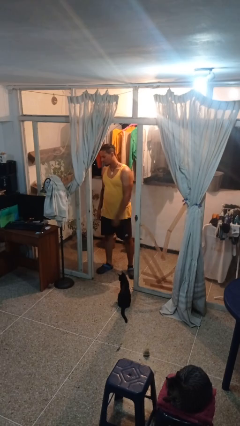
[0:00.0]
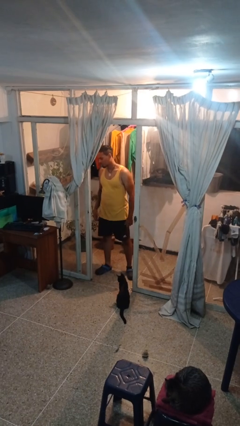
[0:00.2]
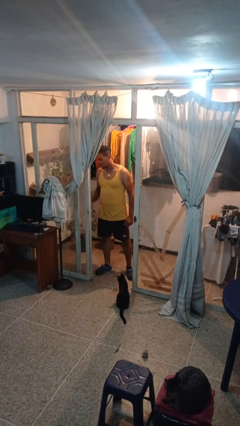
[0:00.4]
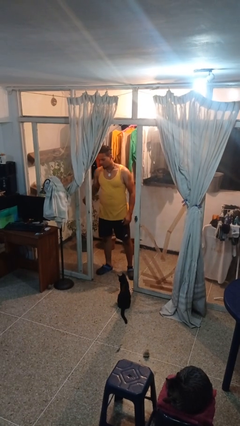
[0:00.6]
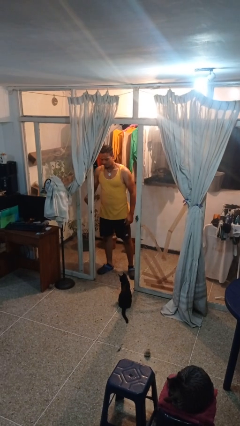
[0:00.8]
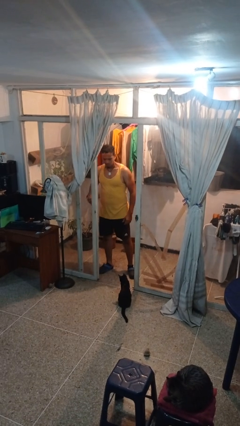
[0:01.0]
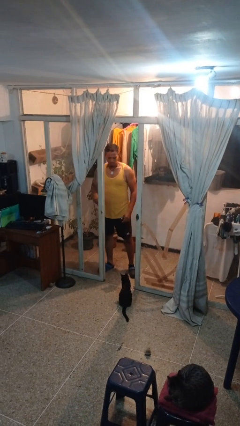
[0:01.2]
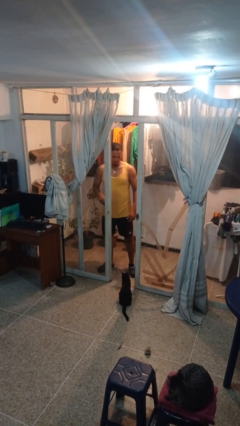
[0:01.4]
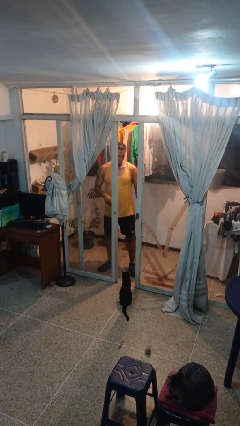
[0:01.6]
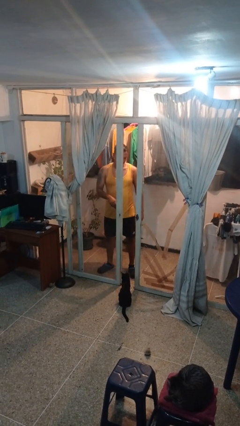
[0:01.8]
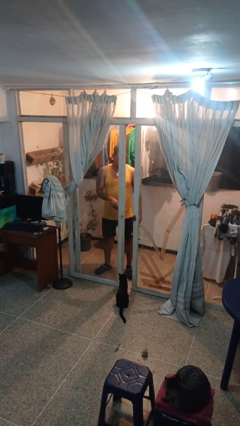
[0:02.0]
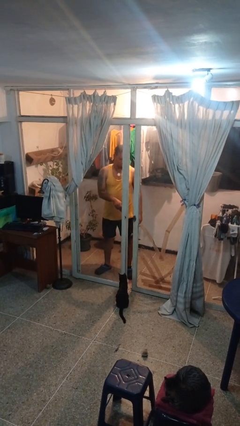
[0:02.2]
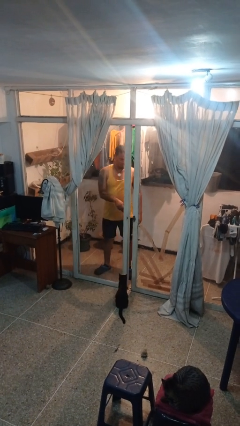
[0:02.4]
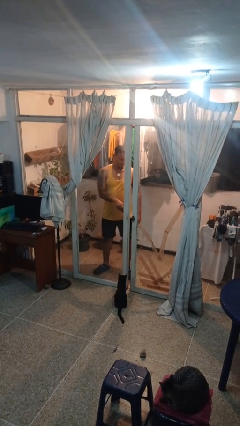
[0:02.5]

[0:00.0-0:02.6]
person closes sliding door

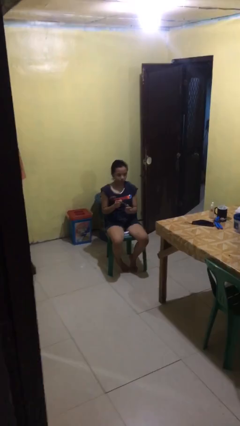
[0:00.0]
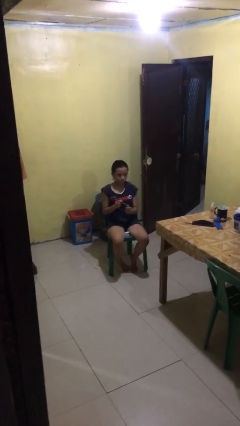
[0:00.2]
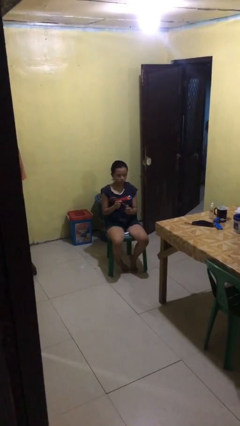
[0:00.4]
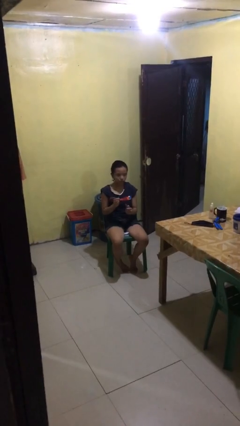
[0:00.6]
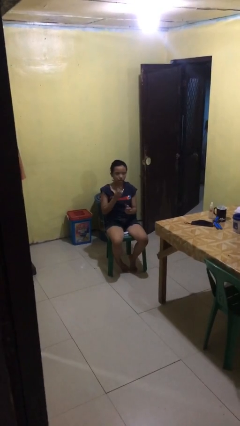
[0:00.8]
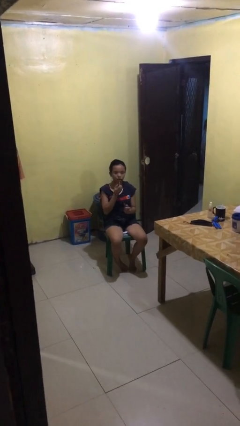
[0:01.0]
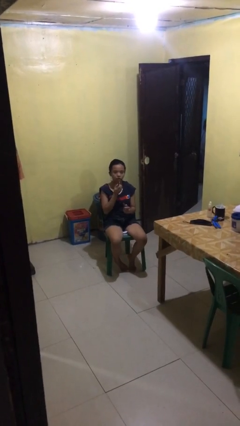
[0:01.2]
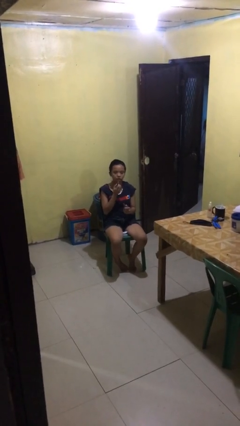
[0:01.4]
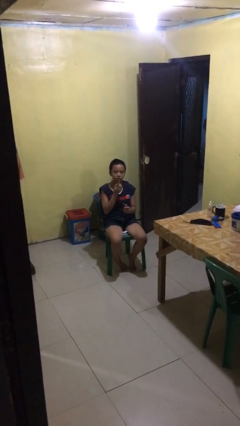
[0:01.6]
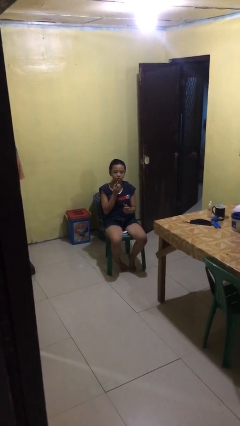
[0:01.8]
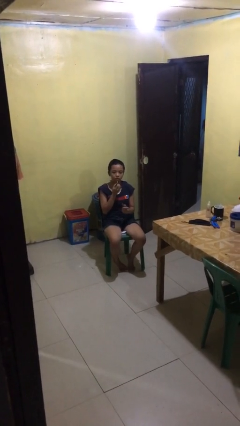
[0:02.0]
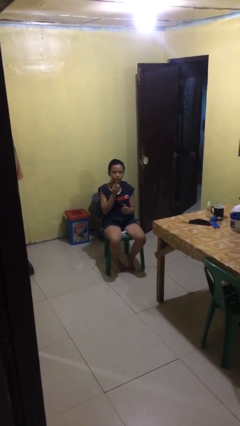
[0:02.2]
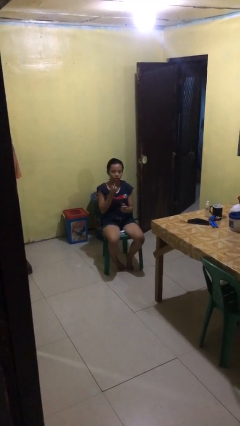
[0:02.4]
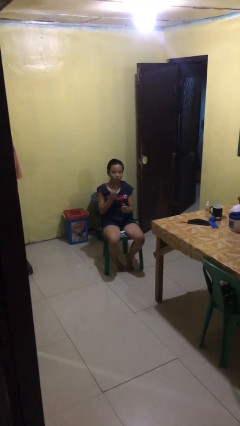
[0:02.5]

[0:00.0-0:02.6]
person applies lip makeup

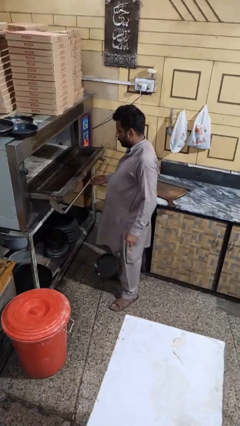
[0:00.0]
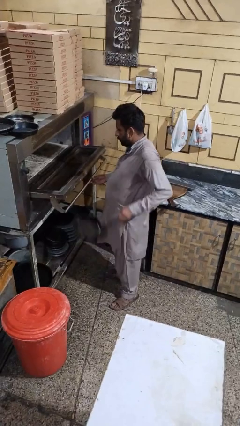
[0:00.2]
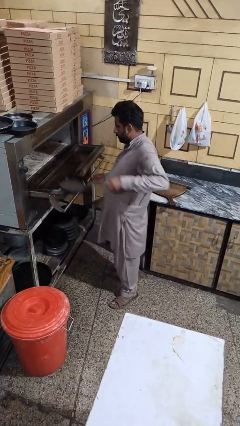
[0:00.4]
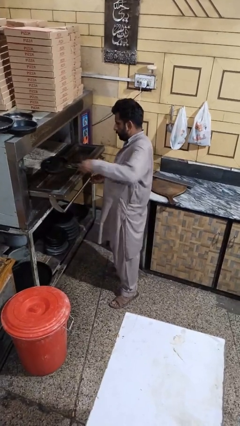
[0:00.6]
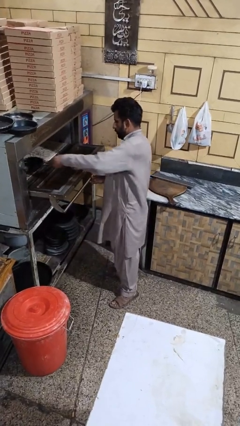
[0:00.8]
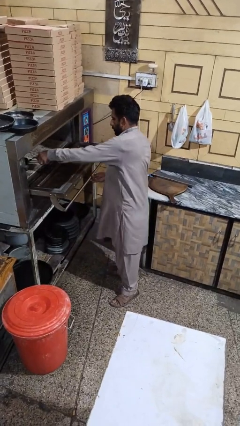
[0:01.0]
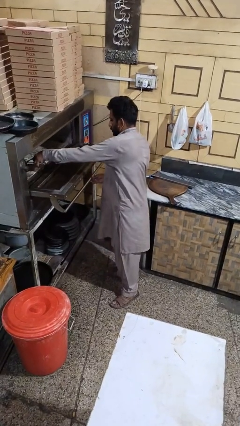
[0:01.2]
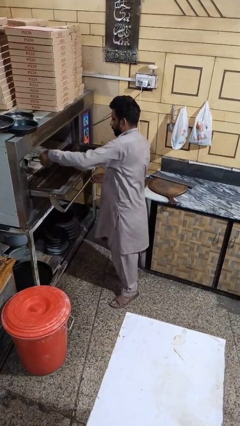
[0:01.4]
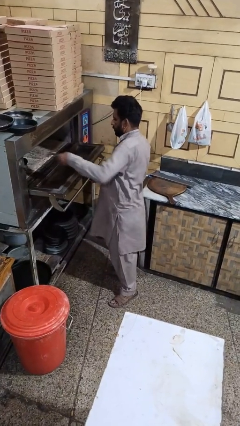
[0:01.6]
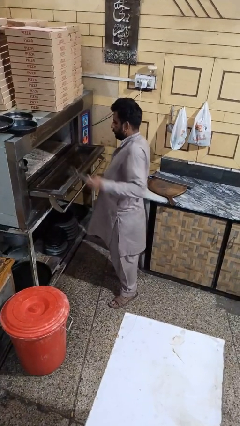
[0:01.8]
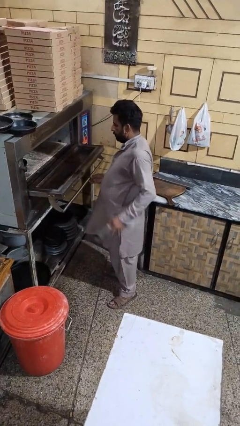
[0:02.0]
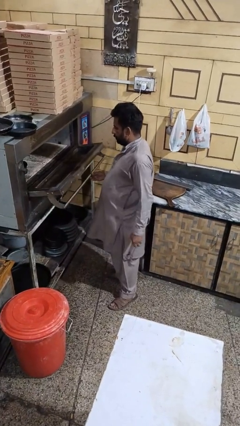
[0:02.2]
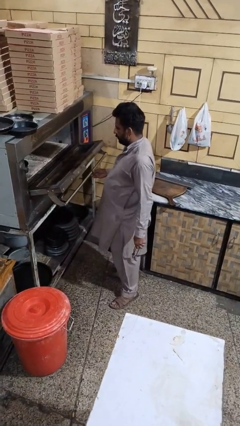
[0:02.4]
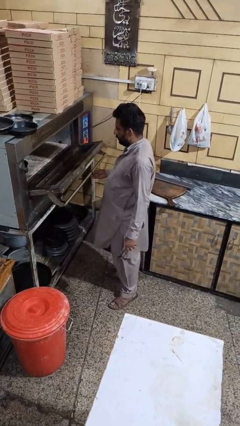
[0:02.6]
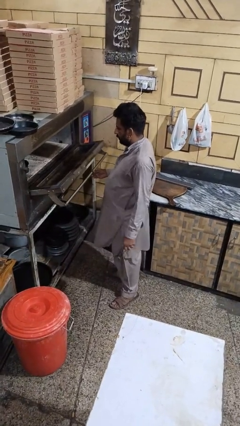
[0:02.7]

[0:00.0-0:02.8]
person puts object into microwave

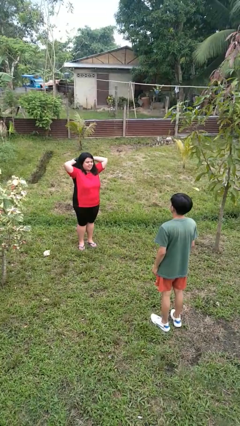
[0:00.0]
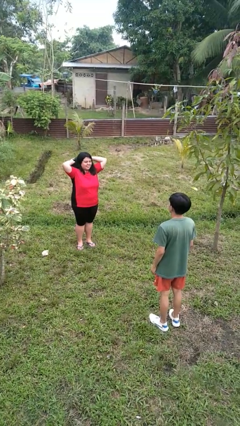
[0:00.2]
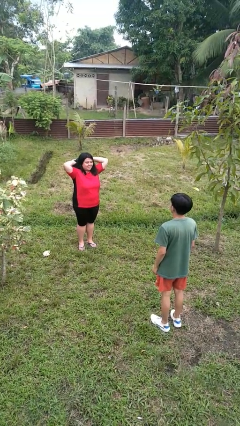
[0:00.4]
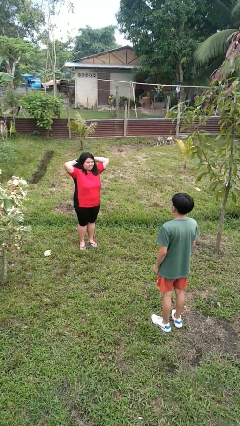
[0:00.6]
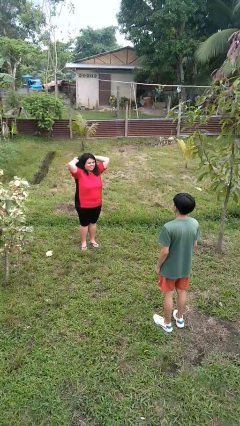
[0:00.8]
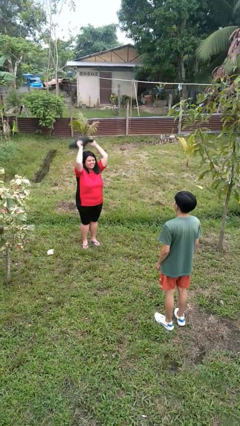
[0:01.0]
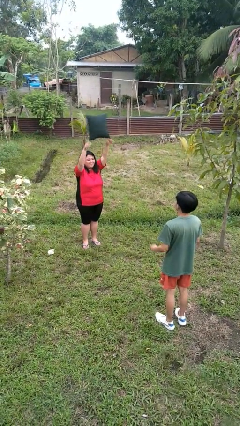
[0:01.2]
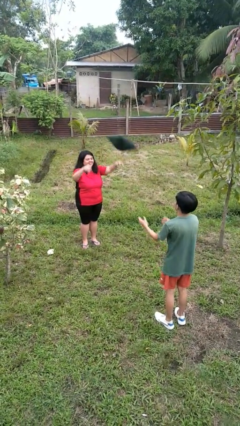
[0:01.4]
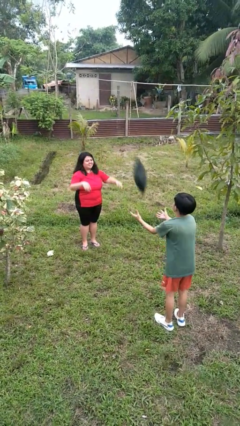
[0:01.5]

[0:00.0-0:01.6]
person throws object to person

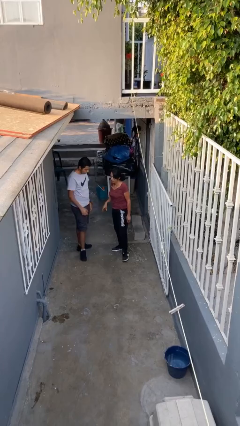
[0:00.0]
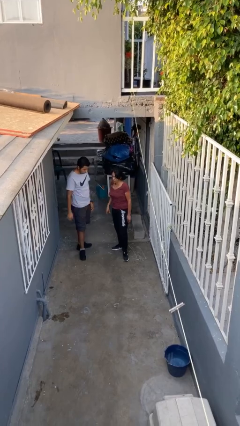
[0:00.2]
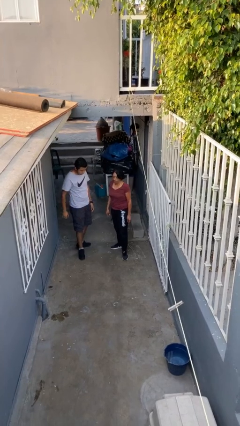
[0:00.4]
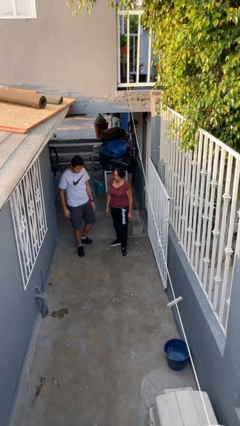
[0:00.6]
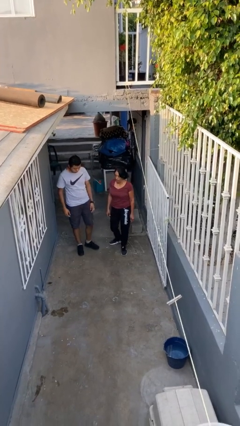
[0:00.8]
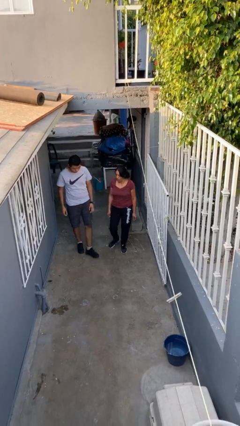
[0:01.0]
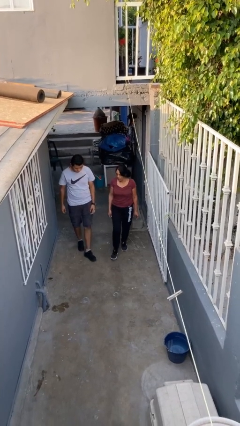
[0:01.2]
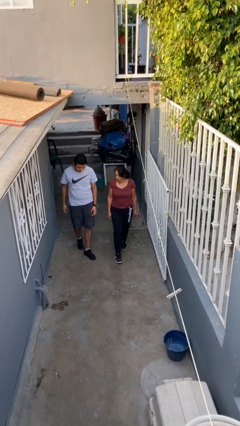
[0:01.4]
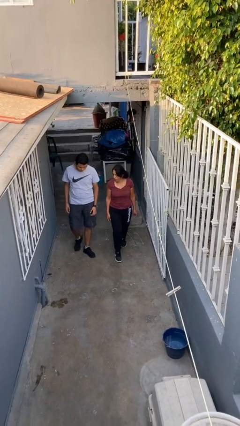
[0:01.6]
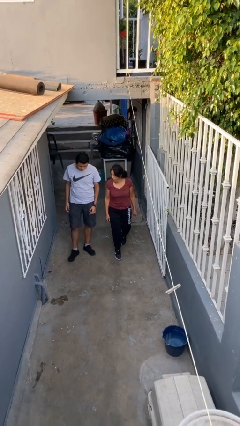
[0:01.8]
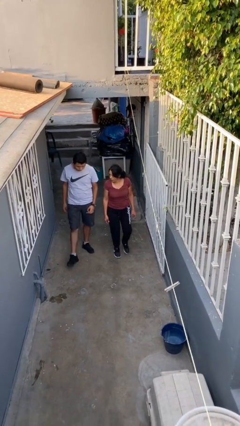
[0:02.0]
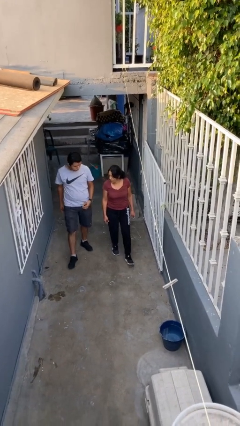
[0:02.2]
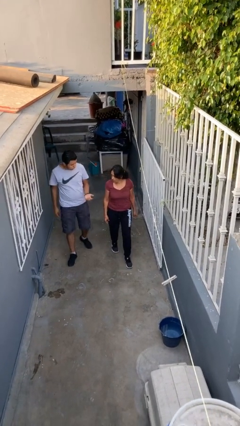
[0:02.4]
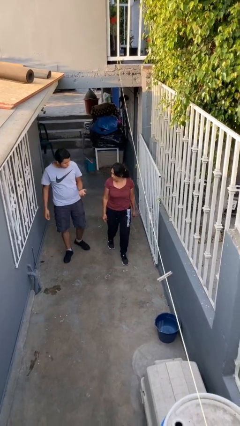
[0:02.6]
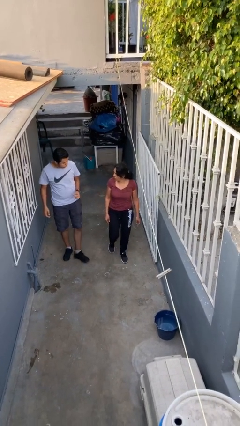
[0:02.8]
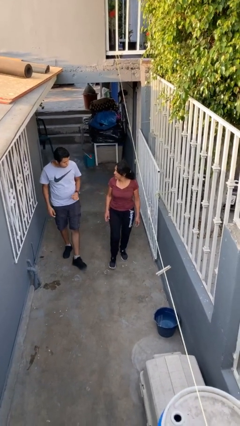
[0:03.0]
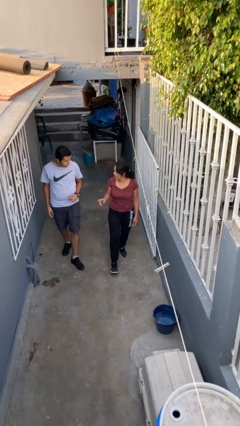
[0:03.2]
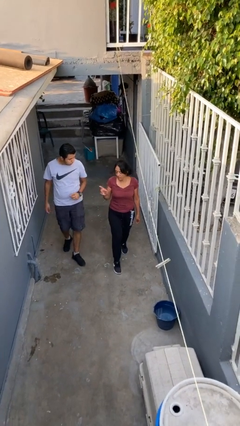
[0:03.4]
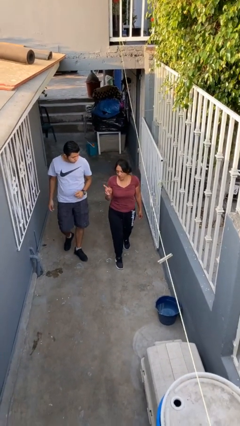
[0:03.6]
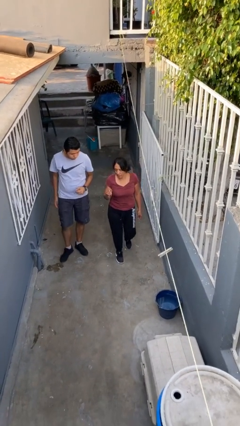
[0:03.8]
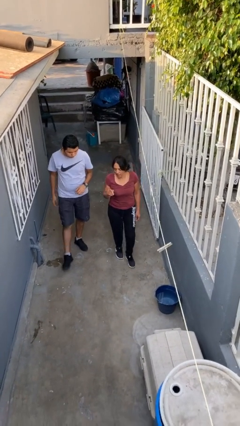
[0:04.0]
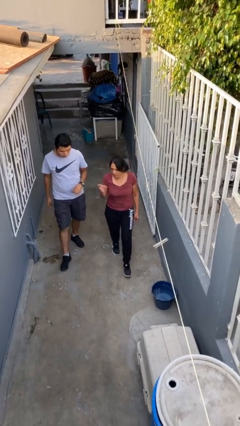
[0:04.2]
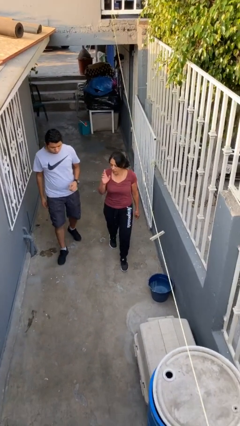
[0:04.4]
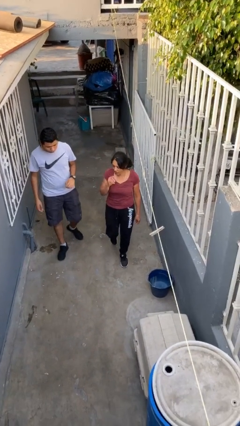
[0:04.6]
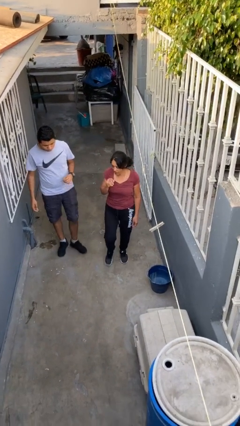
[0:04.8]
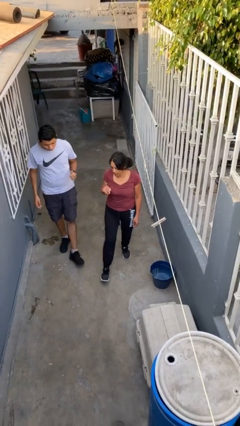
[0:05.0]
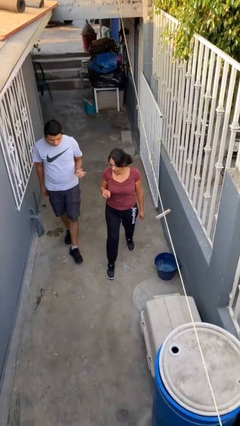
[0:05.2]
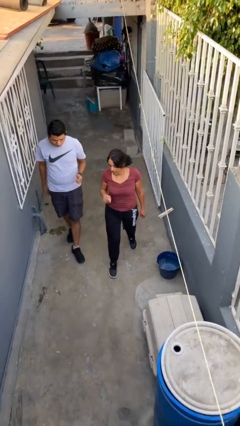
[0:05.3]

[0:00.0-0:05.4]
person talks to person

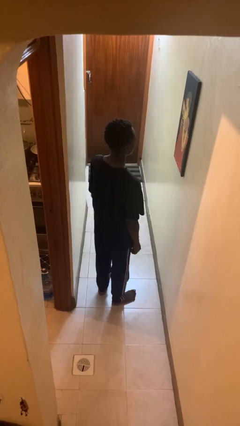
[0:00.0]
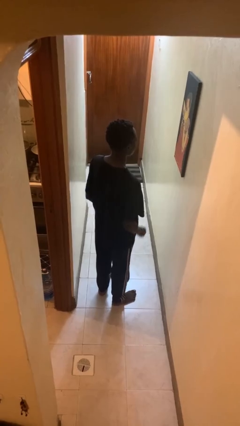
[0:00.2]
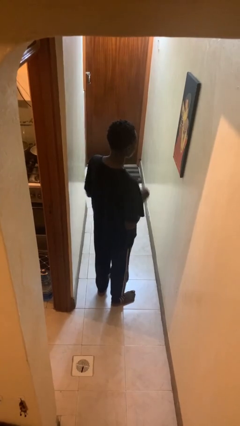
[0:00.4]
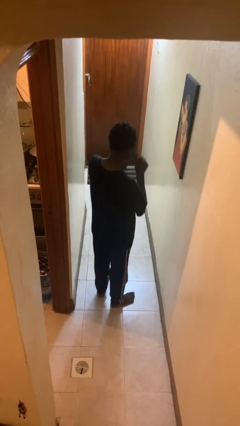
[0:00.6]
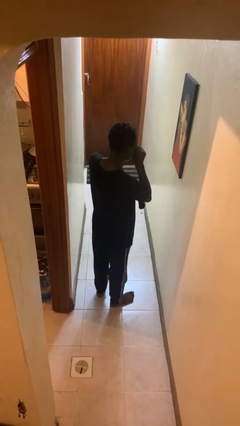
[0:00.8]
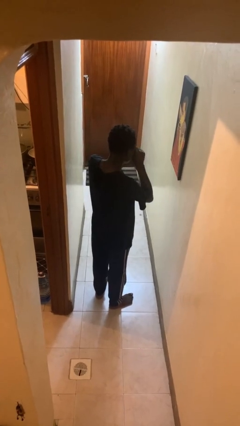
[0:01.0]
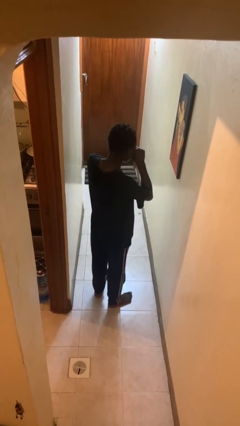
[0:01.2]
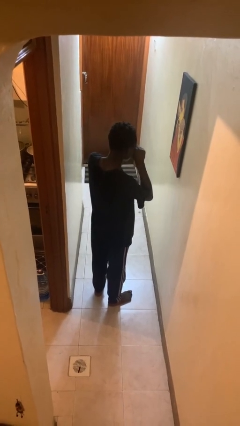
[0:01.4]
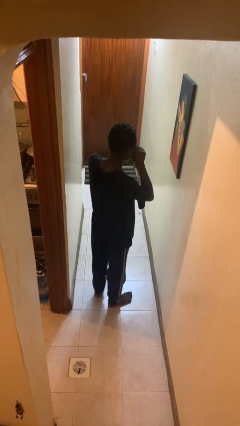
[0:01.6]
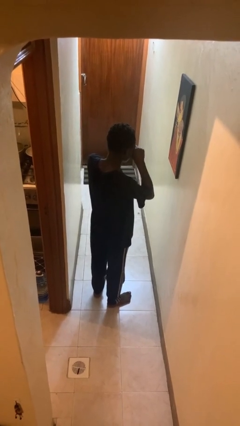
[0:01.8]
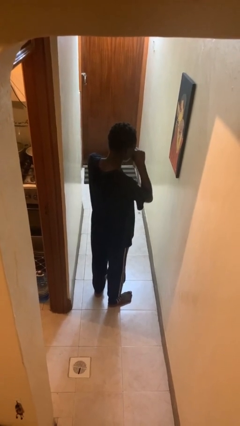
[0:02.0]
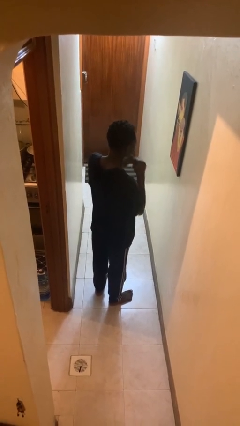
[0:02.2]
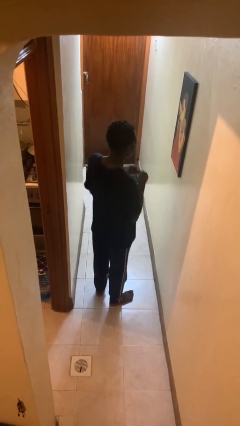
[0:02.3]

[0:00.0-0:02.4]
person rubs eyes
